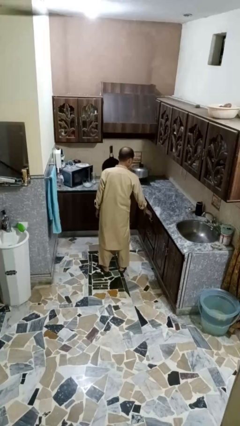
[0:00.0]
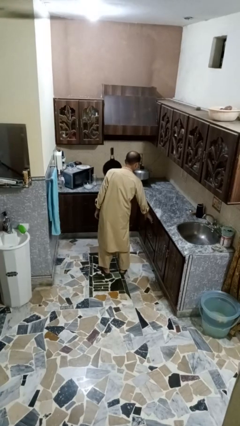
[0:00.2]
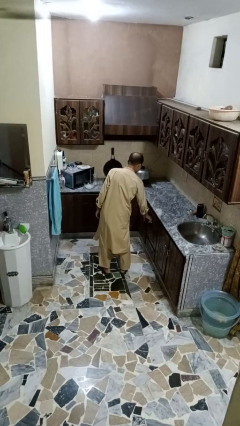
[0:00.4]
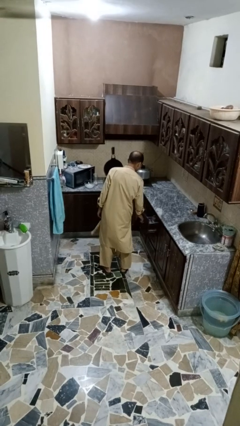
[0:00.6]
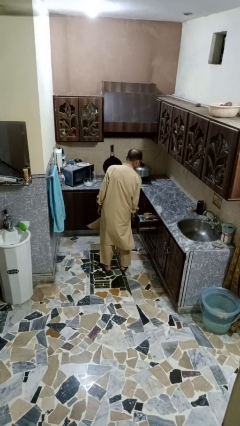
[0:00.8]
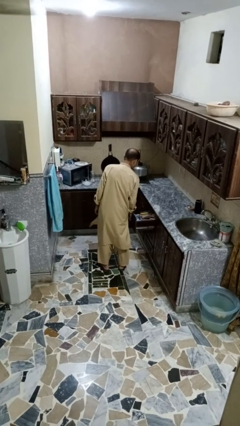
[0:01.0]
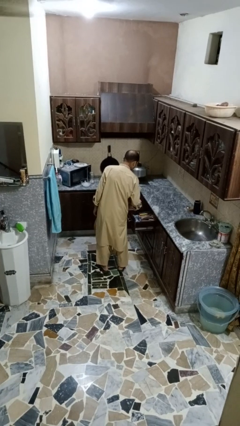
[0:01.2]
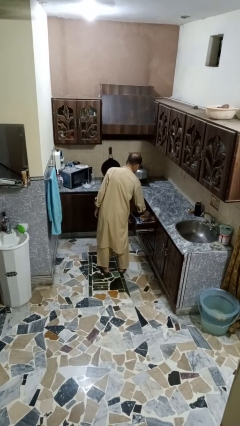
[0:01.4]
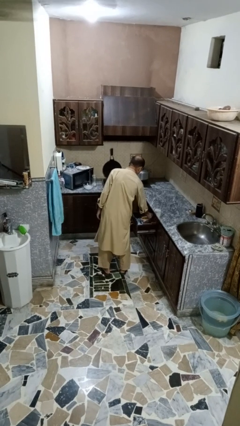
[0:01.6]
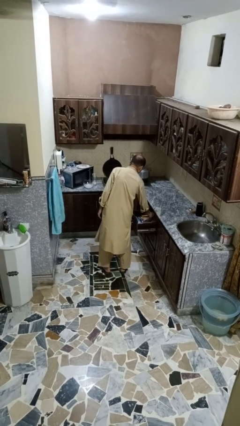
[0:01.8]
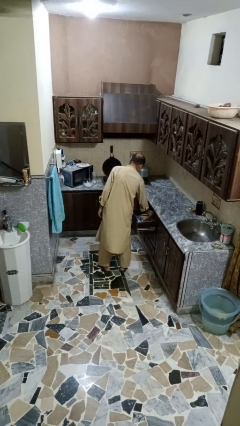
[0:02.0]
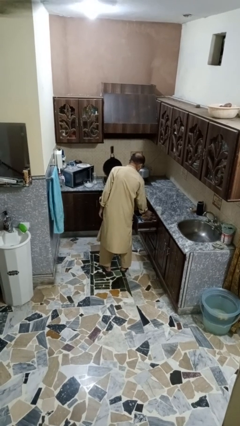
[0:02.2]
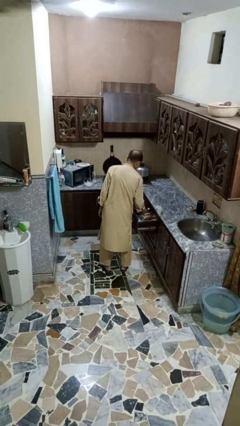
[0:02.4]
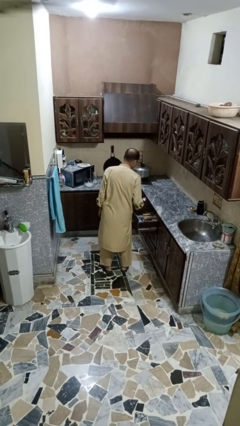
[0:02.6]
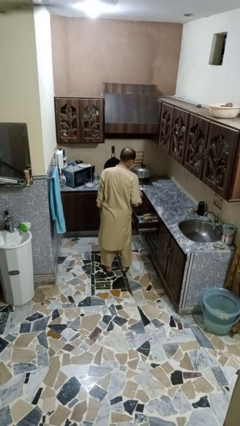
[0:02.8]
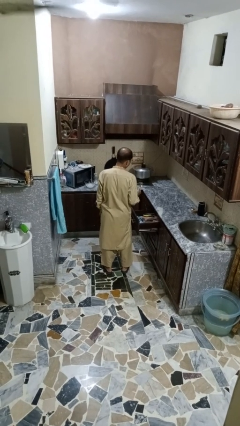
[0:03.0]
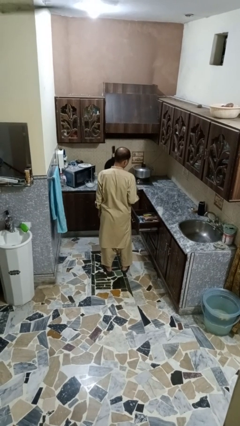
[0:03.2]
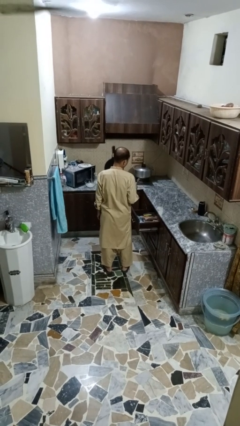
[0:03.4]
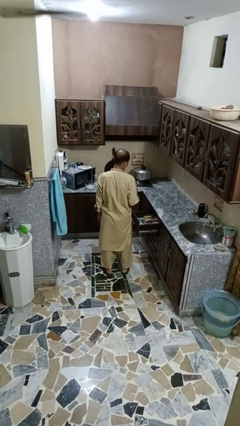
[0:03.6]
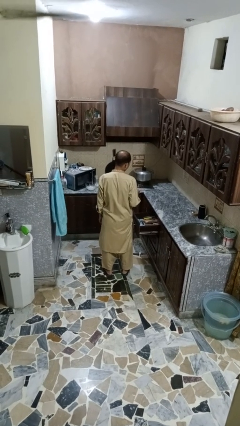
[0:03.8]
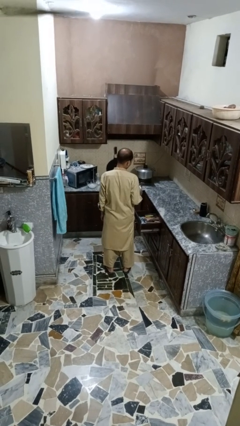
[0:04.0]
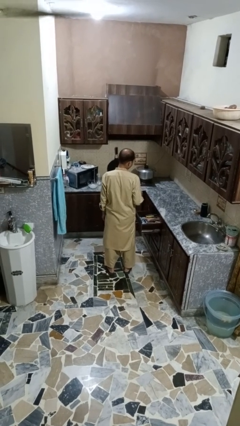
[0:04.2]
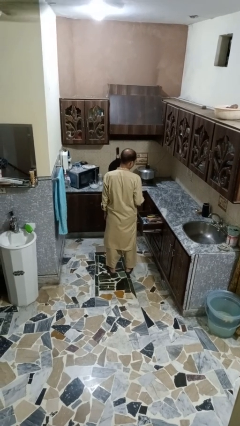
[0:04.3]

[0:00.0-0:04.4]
person takes object from kitchen drawer

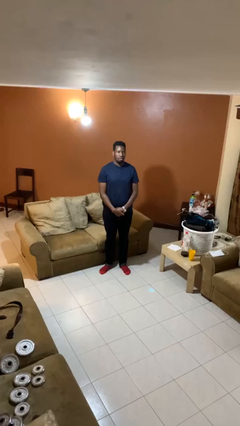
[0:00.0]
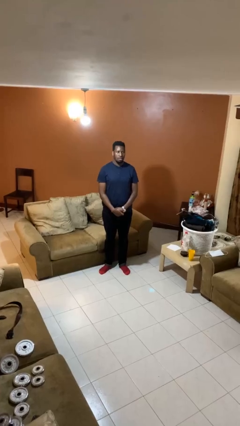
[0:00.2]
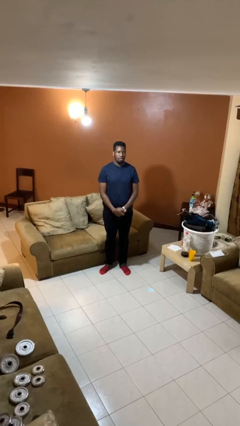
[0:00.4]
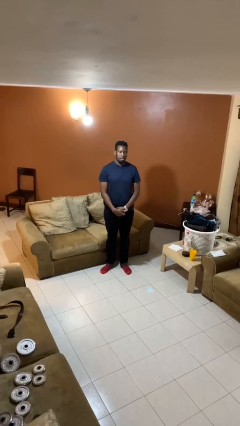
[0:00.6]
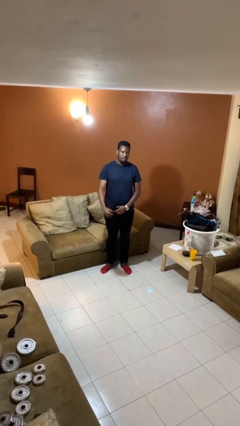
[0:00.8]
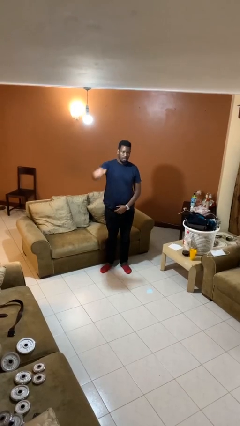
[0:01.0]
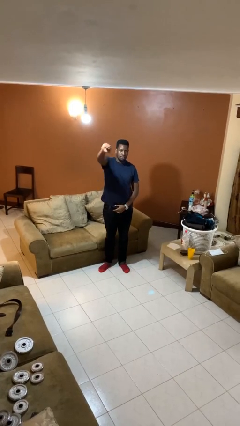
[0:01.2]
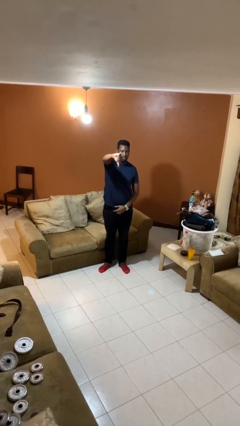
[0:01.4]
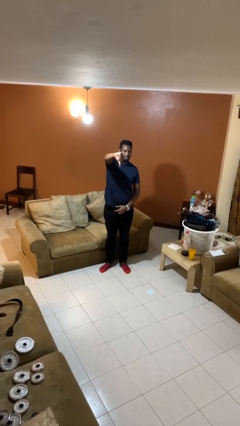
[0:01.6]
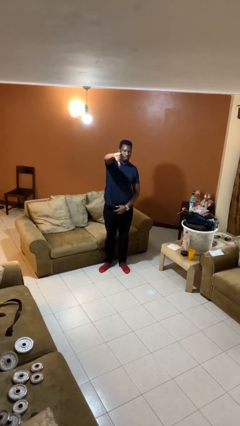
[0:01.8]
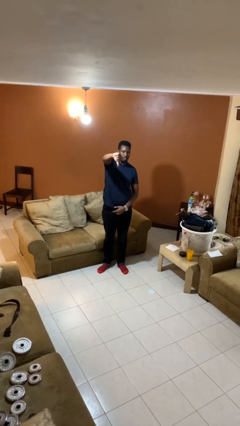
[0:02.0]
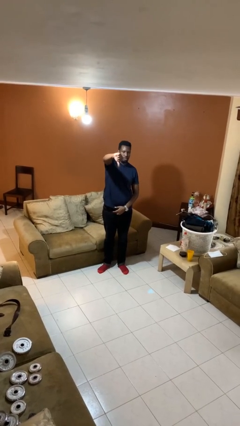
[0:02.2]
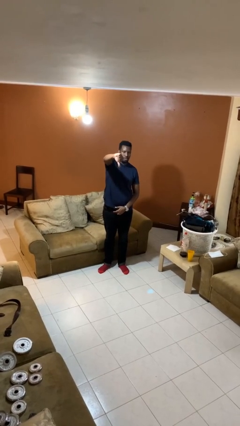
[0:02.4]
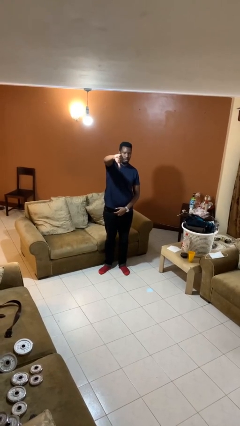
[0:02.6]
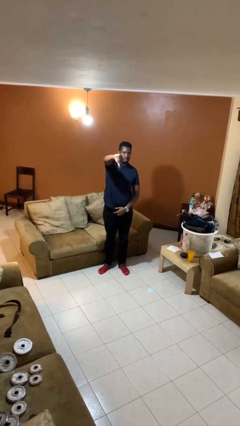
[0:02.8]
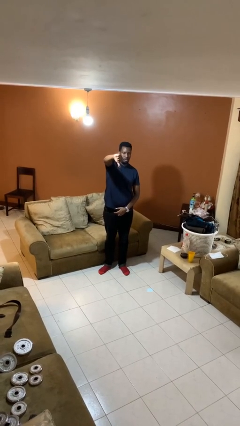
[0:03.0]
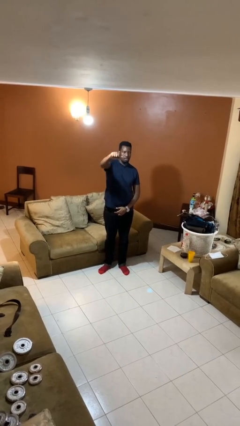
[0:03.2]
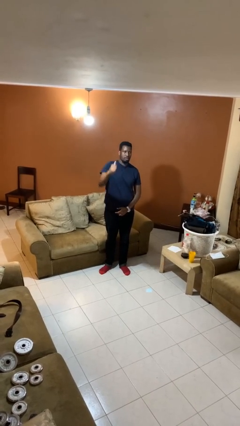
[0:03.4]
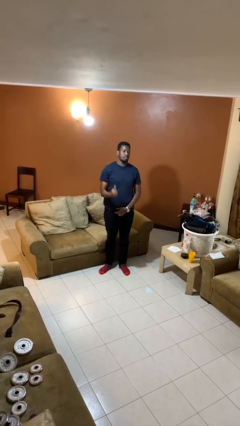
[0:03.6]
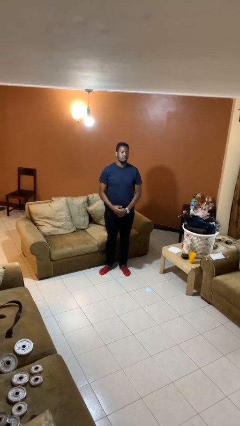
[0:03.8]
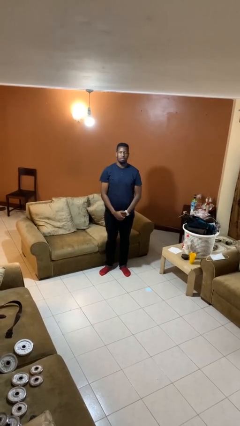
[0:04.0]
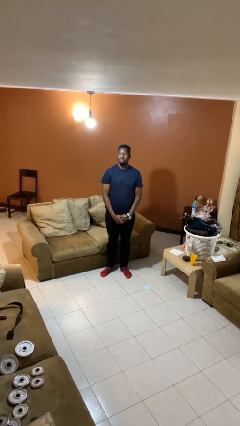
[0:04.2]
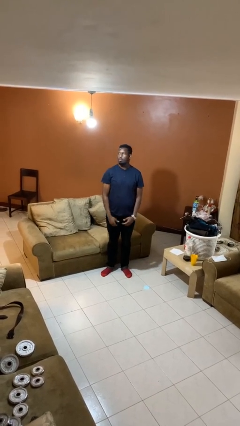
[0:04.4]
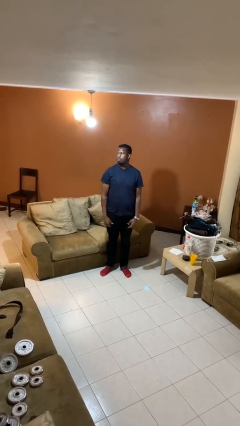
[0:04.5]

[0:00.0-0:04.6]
person gestures thumbs down

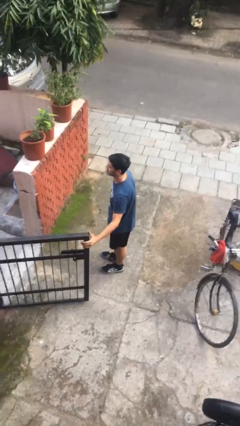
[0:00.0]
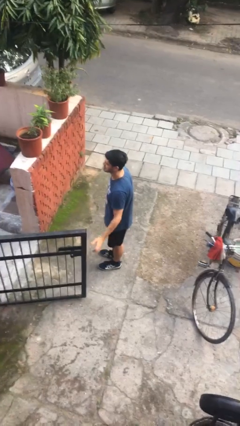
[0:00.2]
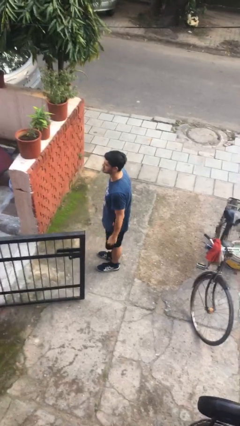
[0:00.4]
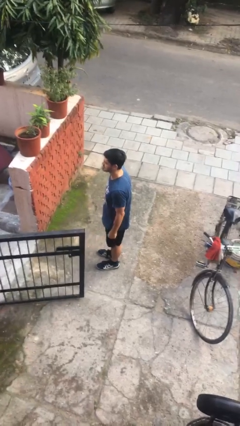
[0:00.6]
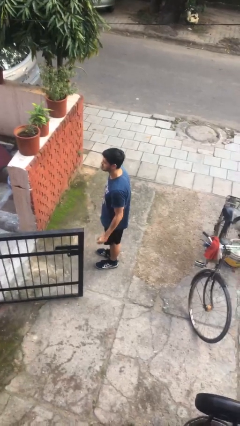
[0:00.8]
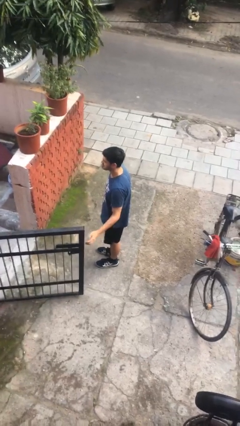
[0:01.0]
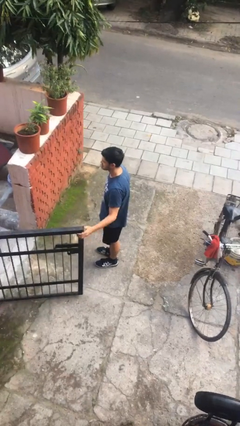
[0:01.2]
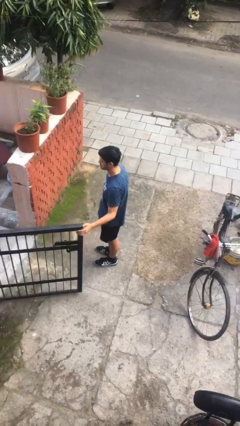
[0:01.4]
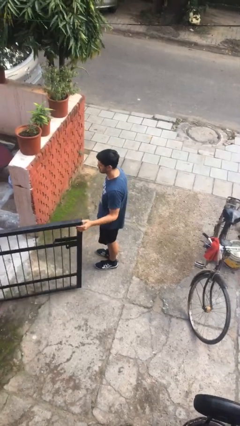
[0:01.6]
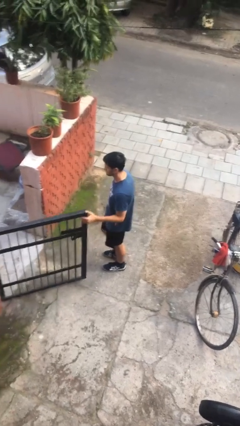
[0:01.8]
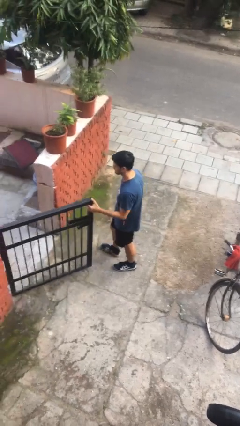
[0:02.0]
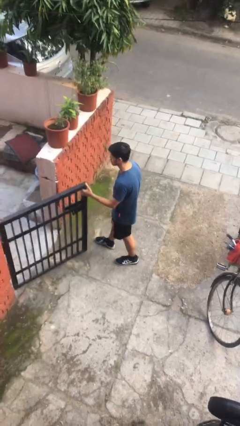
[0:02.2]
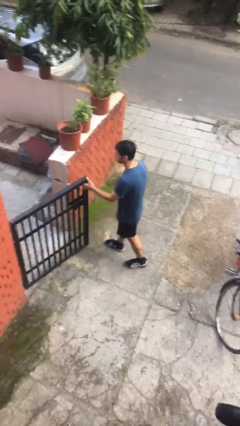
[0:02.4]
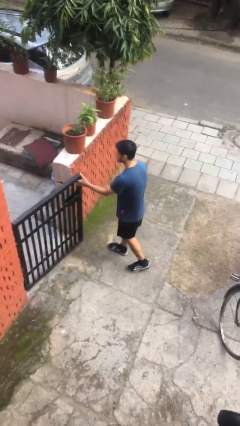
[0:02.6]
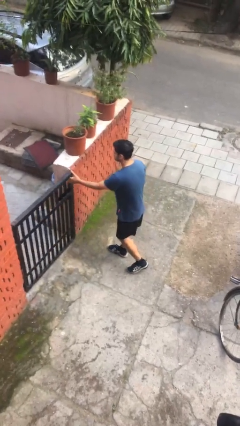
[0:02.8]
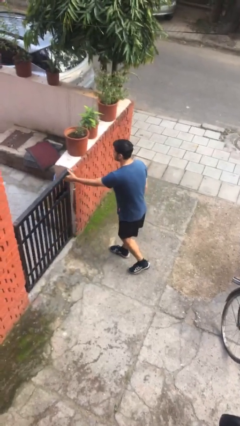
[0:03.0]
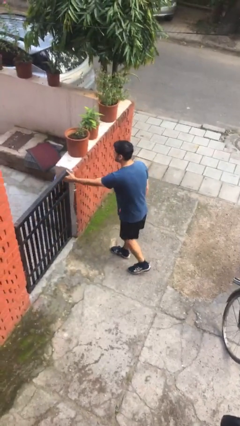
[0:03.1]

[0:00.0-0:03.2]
person closes gate

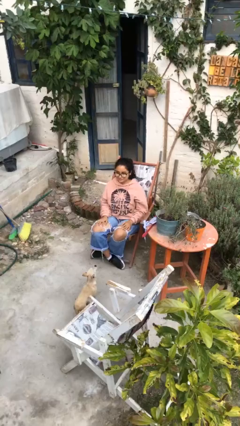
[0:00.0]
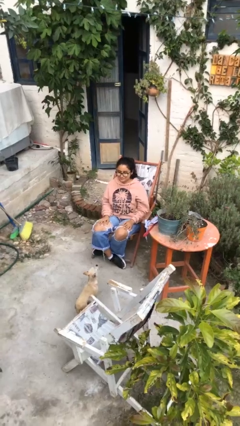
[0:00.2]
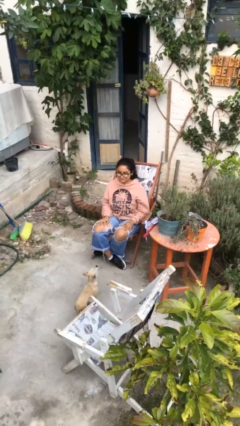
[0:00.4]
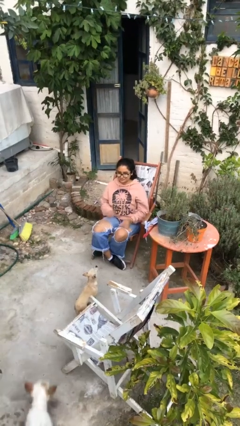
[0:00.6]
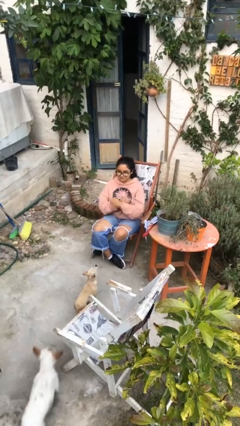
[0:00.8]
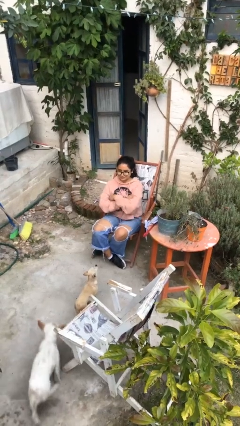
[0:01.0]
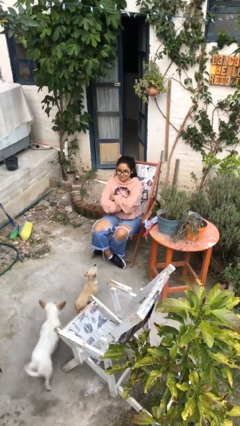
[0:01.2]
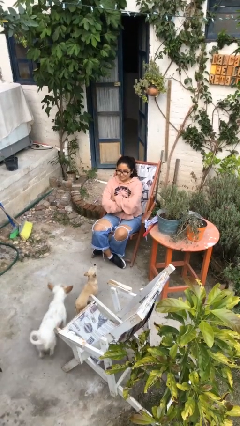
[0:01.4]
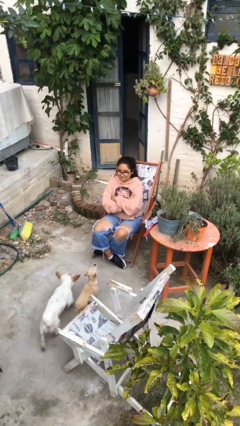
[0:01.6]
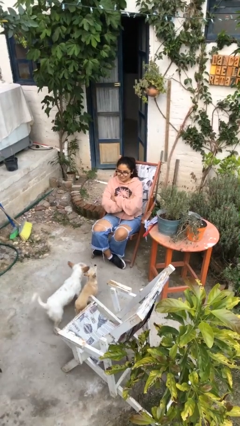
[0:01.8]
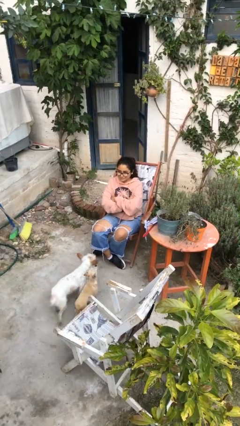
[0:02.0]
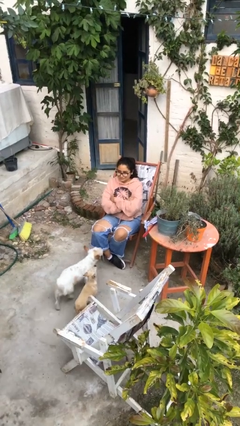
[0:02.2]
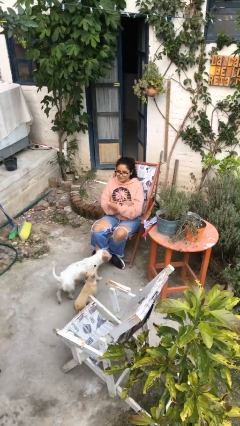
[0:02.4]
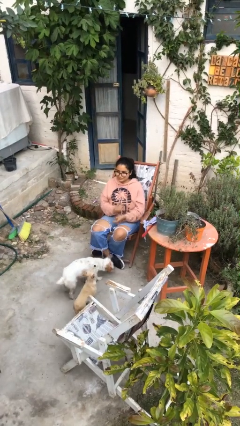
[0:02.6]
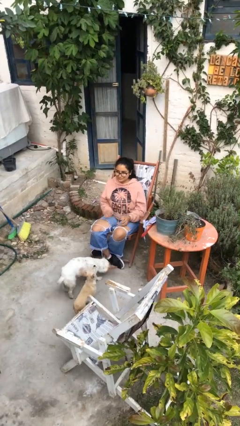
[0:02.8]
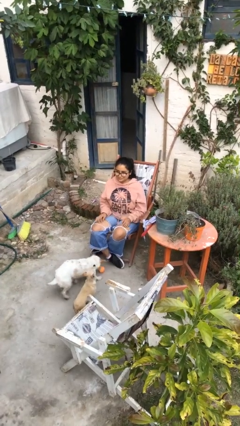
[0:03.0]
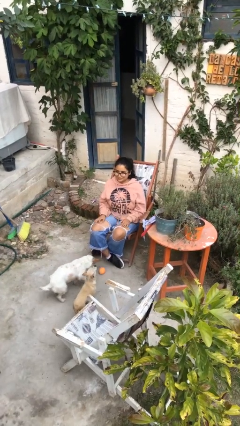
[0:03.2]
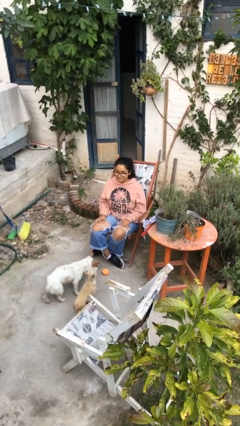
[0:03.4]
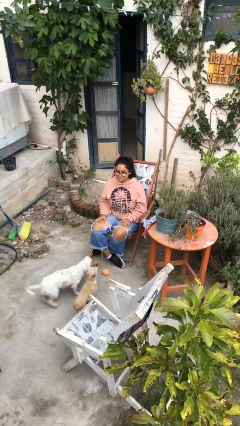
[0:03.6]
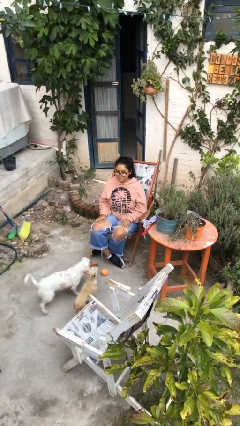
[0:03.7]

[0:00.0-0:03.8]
person crosses arms

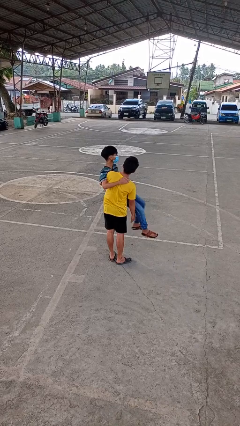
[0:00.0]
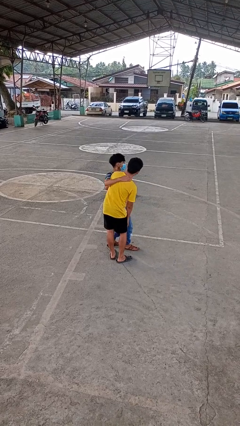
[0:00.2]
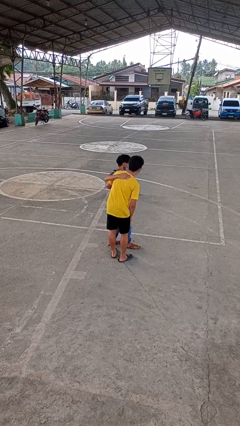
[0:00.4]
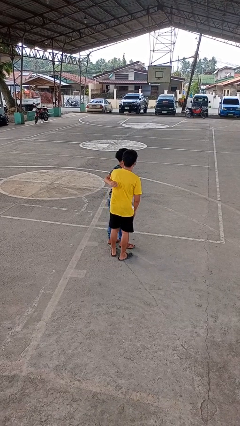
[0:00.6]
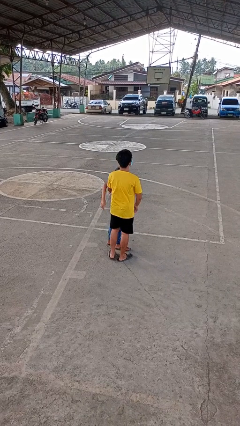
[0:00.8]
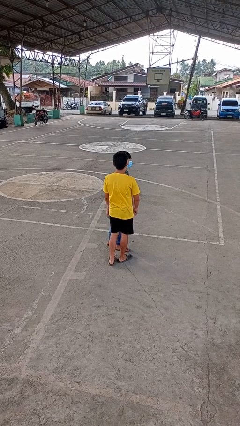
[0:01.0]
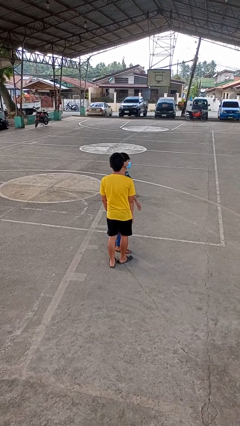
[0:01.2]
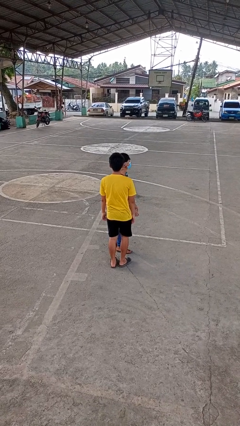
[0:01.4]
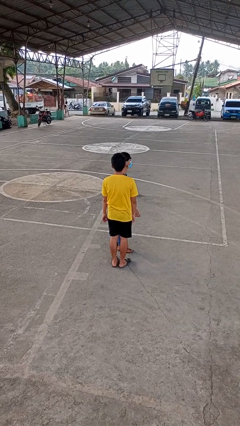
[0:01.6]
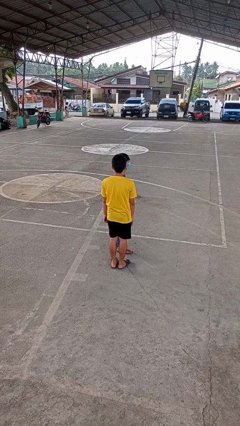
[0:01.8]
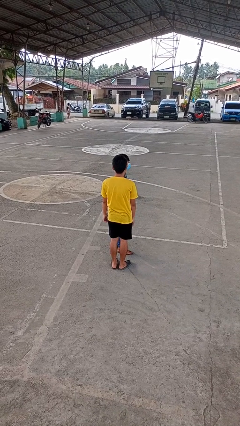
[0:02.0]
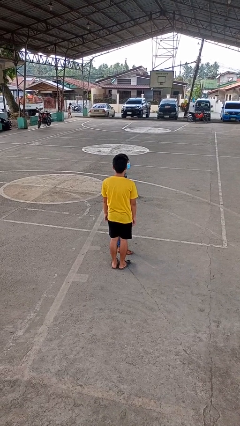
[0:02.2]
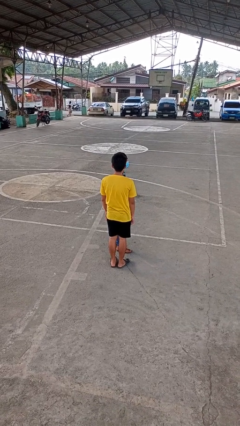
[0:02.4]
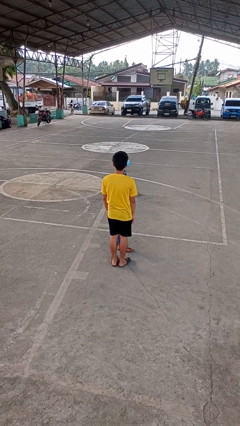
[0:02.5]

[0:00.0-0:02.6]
person puts down person
